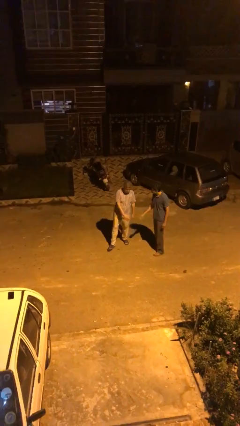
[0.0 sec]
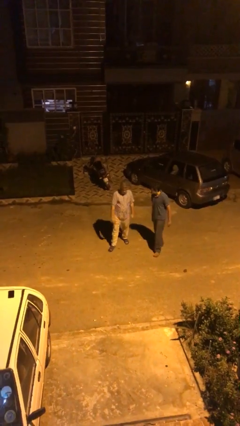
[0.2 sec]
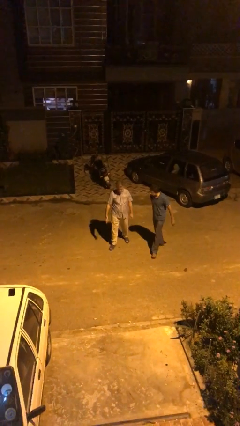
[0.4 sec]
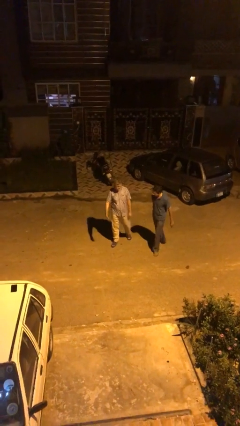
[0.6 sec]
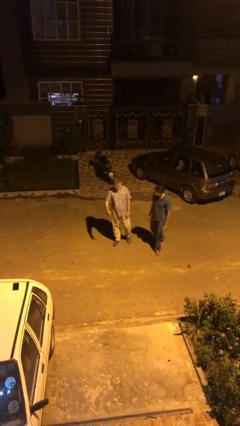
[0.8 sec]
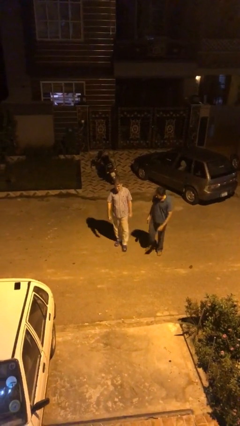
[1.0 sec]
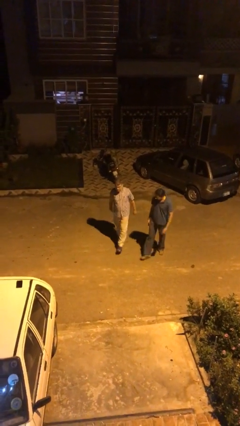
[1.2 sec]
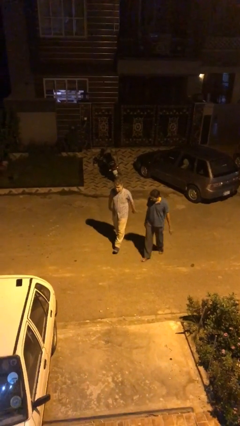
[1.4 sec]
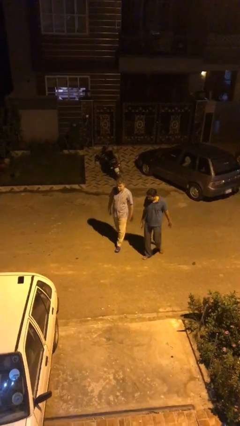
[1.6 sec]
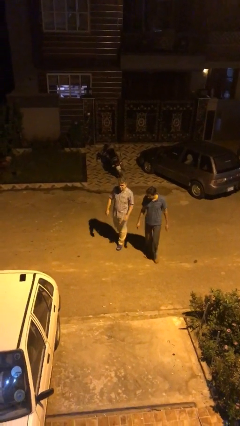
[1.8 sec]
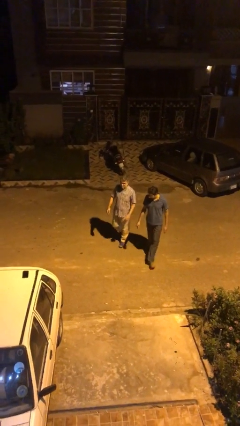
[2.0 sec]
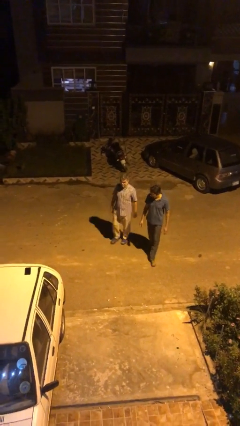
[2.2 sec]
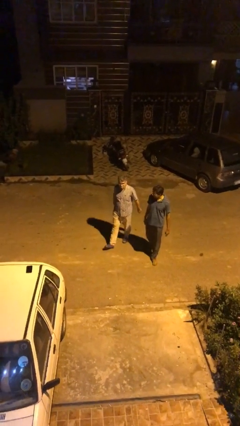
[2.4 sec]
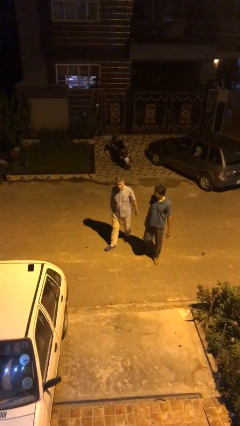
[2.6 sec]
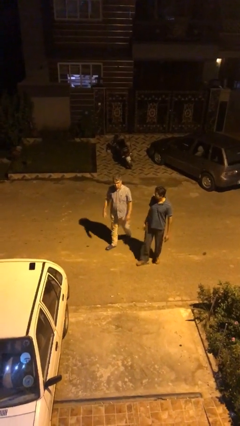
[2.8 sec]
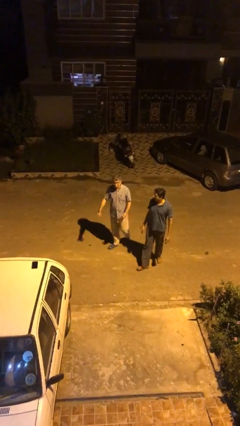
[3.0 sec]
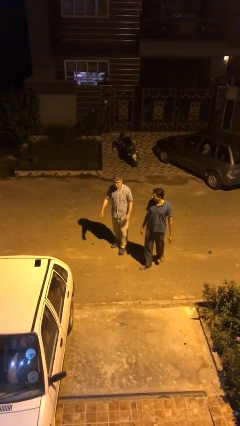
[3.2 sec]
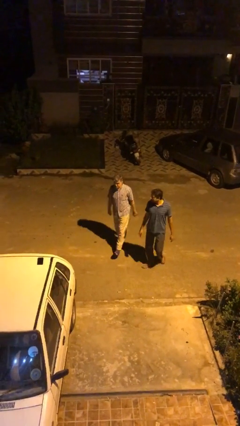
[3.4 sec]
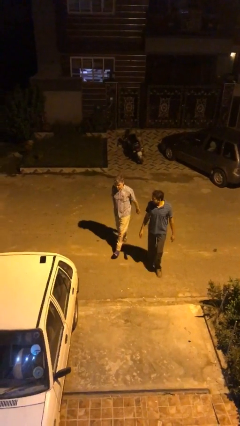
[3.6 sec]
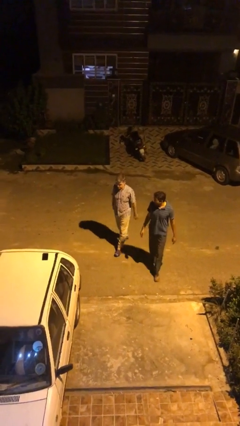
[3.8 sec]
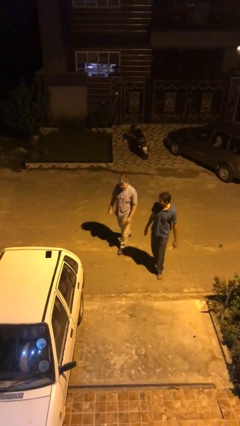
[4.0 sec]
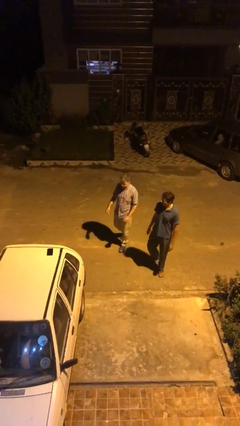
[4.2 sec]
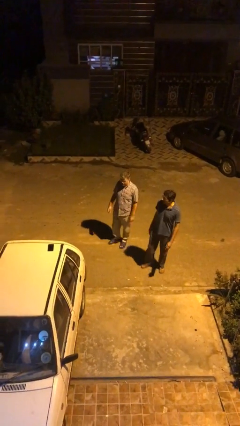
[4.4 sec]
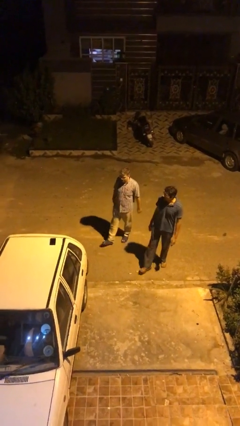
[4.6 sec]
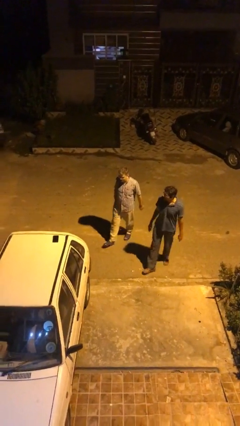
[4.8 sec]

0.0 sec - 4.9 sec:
person talks to person

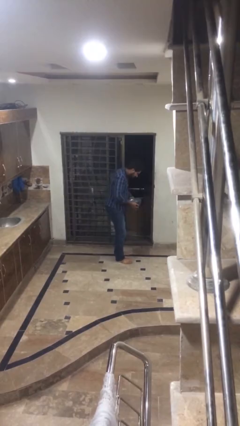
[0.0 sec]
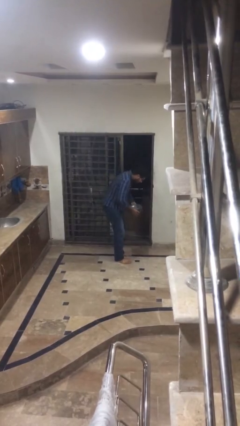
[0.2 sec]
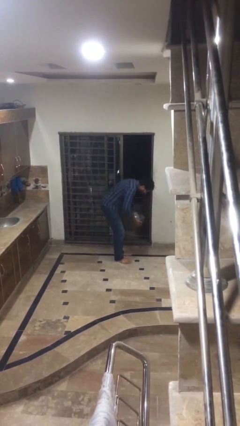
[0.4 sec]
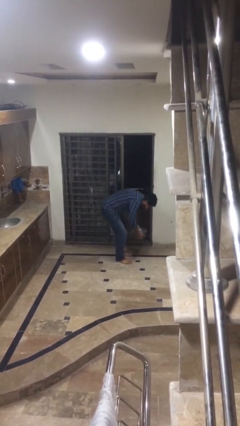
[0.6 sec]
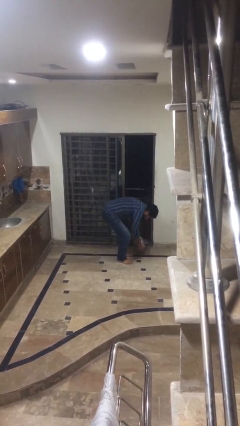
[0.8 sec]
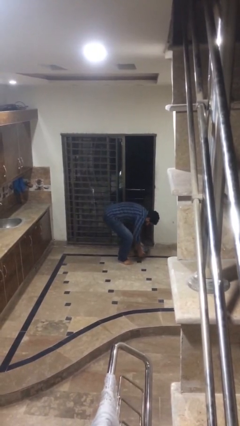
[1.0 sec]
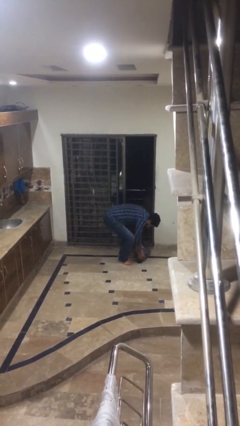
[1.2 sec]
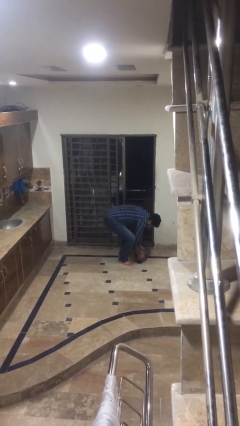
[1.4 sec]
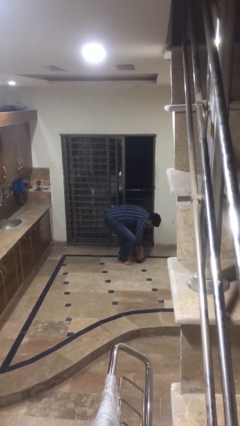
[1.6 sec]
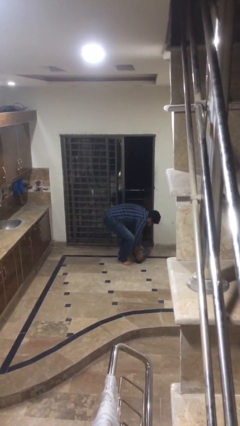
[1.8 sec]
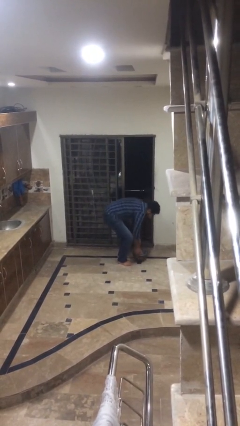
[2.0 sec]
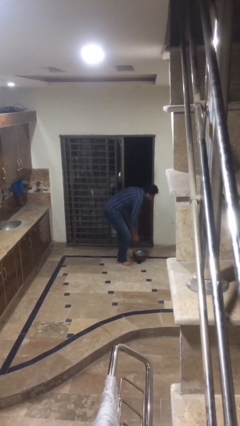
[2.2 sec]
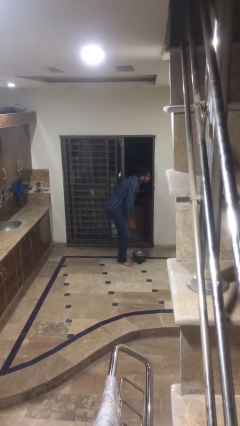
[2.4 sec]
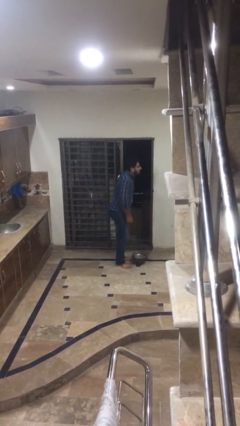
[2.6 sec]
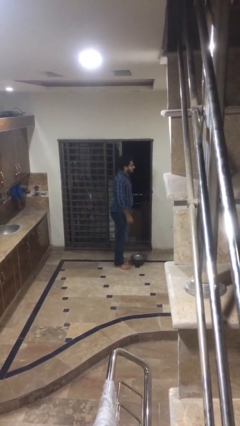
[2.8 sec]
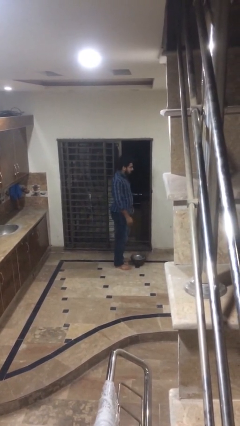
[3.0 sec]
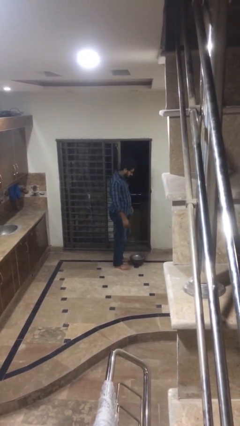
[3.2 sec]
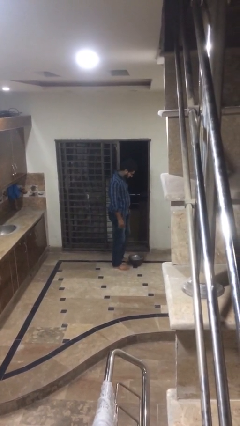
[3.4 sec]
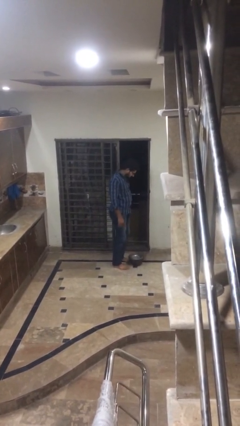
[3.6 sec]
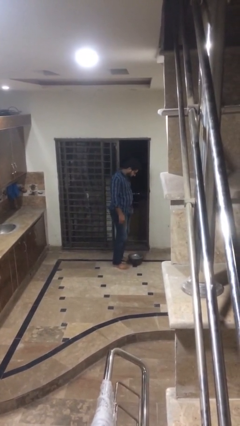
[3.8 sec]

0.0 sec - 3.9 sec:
person puts down object on floor

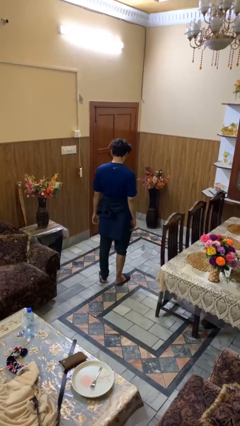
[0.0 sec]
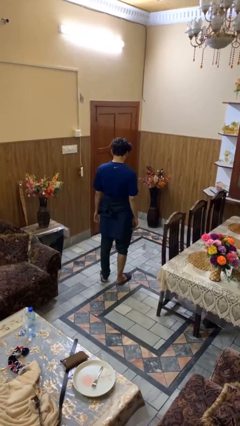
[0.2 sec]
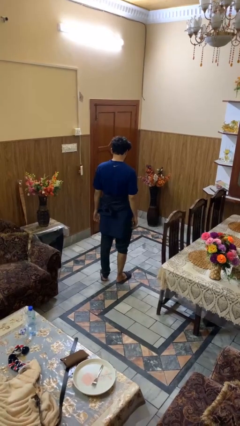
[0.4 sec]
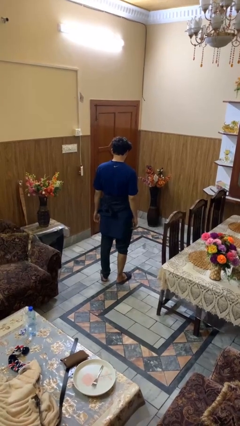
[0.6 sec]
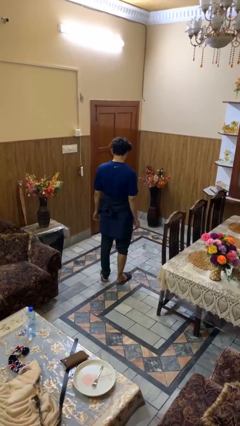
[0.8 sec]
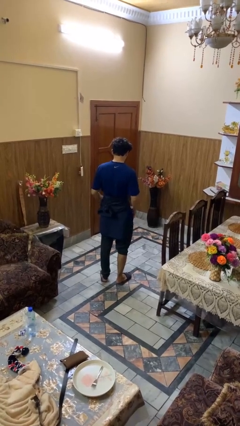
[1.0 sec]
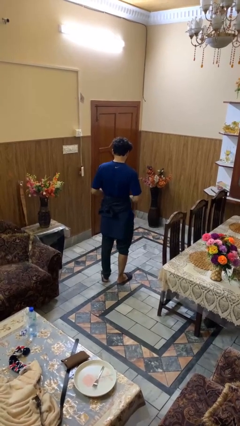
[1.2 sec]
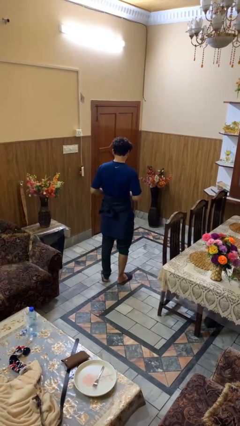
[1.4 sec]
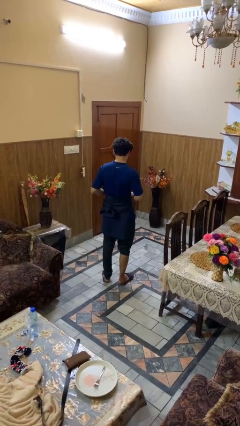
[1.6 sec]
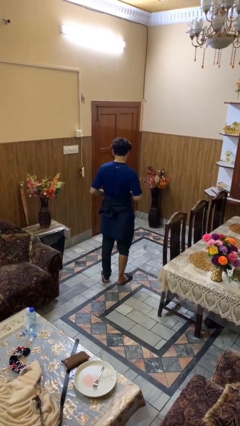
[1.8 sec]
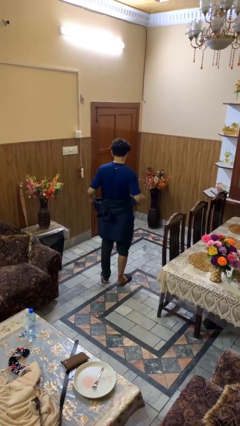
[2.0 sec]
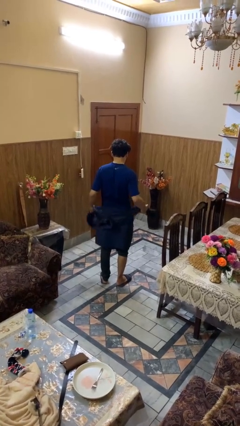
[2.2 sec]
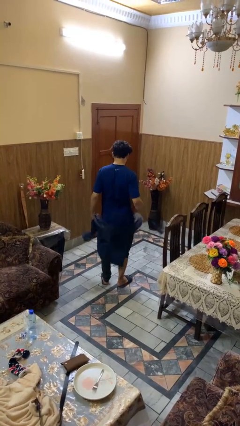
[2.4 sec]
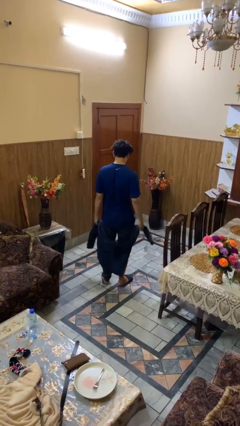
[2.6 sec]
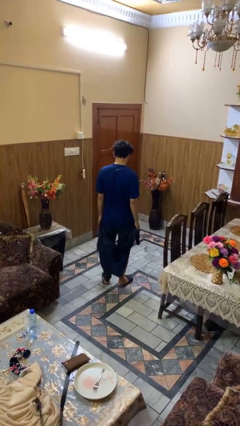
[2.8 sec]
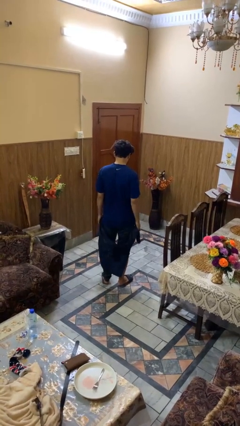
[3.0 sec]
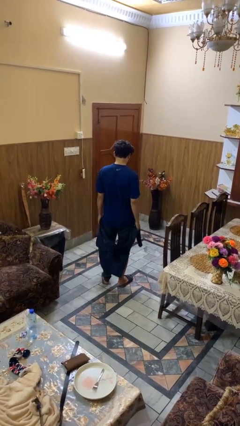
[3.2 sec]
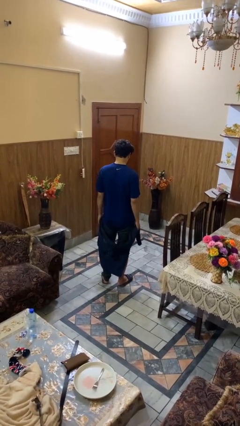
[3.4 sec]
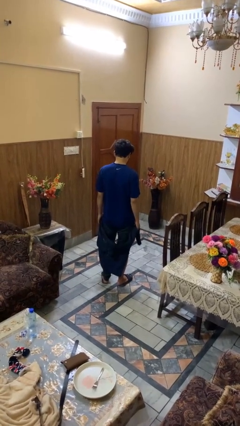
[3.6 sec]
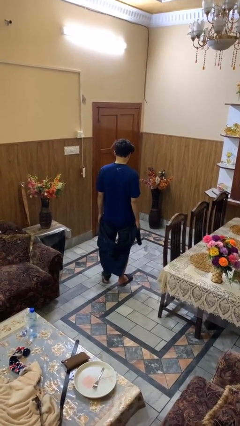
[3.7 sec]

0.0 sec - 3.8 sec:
person unties jacket around waist

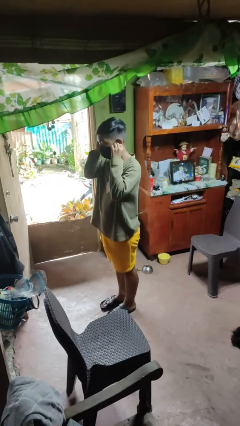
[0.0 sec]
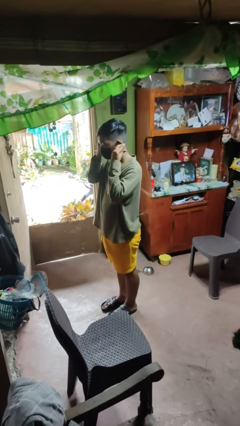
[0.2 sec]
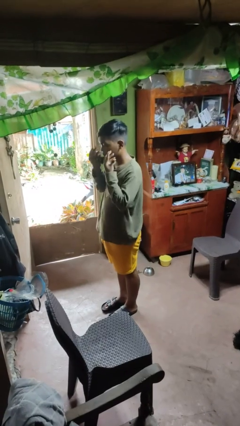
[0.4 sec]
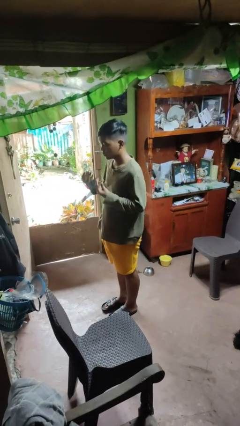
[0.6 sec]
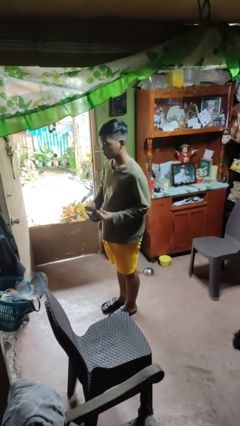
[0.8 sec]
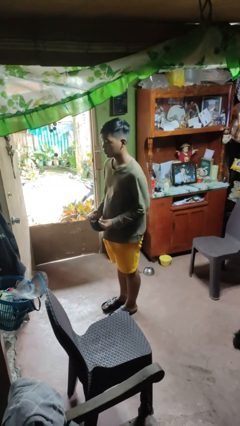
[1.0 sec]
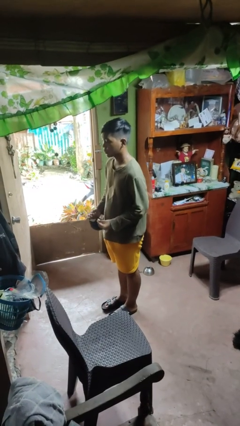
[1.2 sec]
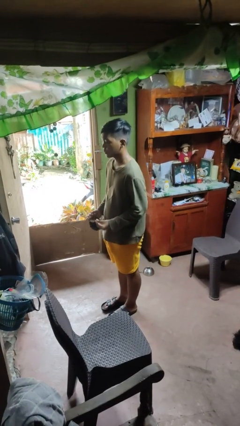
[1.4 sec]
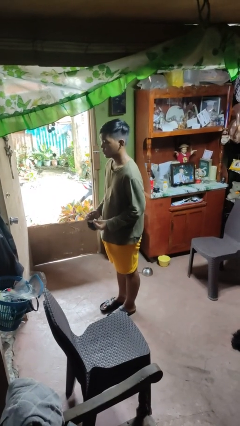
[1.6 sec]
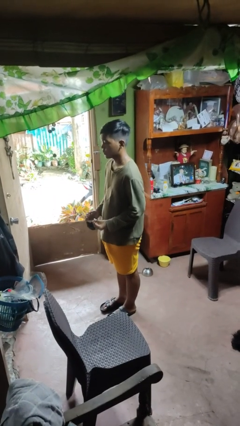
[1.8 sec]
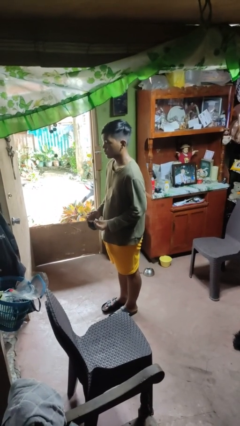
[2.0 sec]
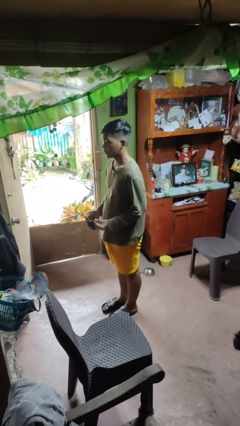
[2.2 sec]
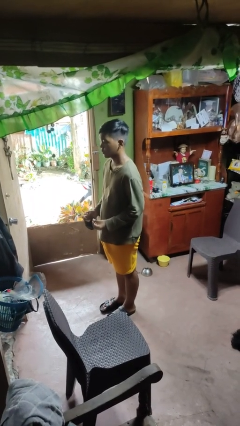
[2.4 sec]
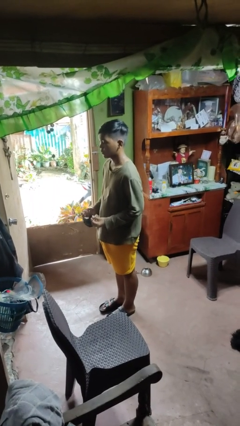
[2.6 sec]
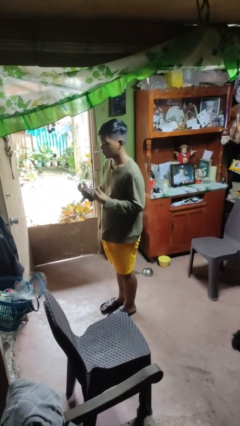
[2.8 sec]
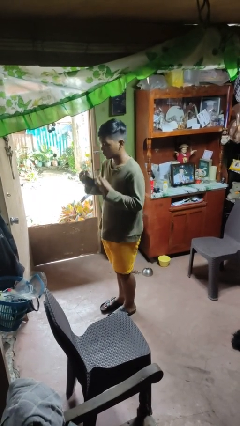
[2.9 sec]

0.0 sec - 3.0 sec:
person takes off facemask

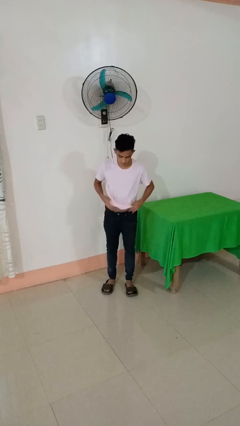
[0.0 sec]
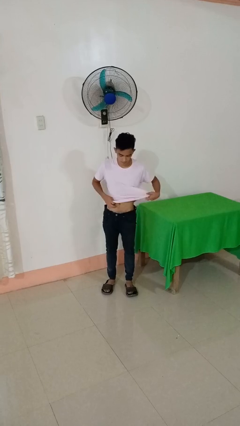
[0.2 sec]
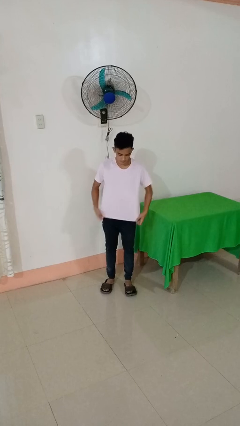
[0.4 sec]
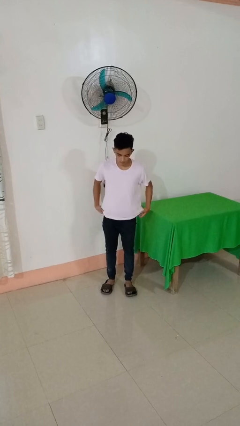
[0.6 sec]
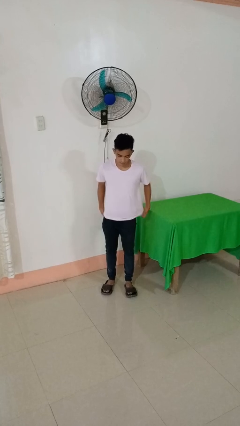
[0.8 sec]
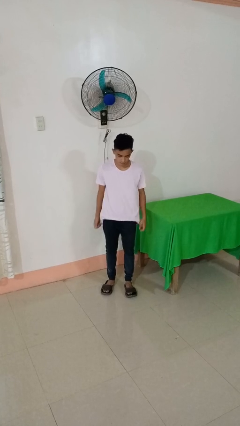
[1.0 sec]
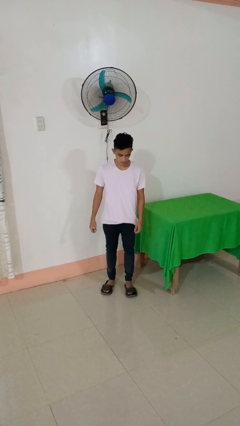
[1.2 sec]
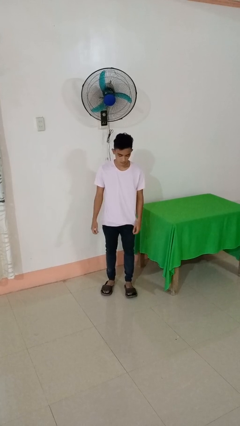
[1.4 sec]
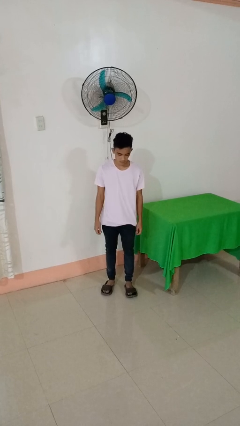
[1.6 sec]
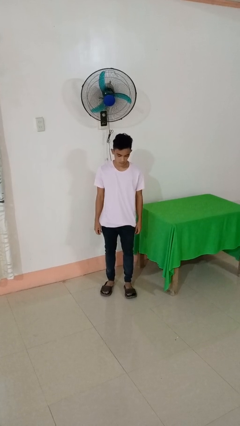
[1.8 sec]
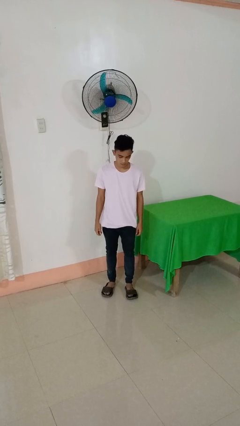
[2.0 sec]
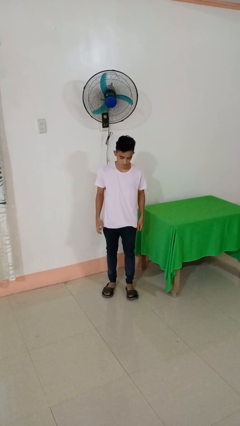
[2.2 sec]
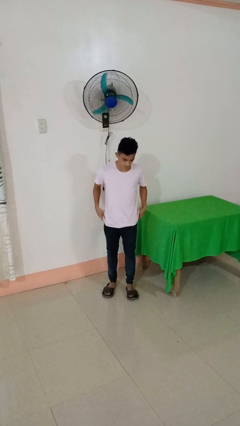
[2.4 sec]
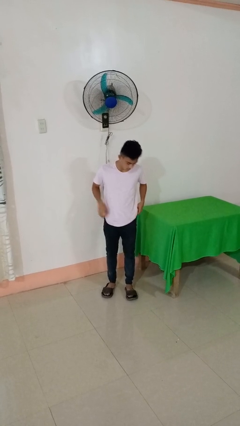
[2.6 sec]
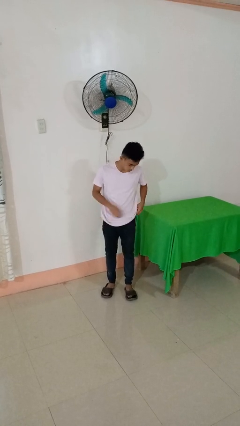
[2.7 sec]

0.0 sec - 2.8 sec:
person untucks shirt
